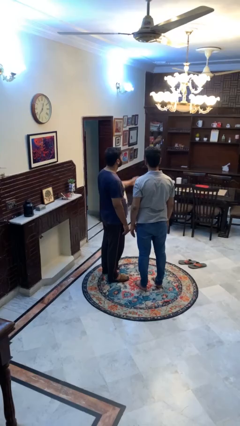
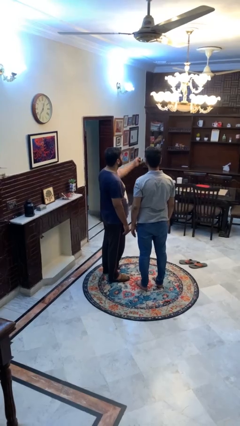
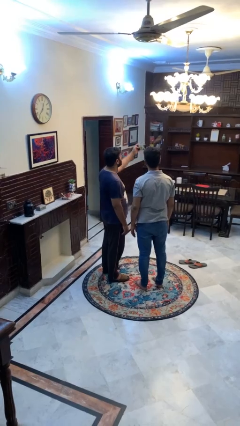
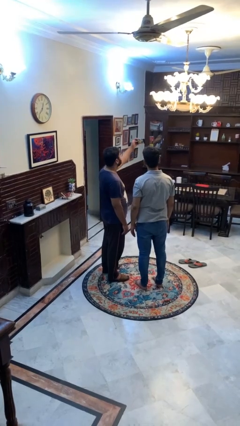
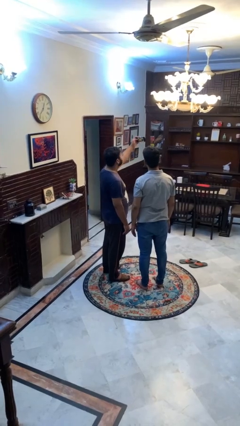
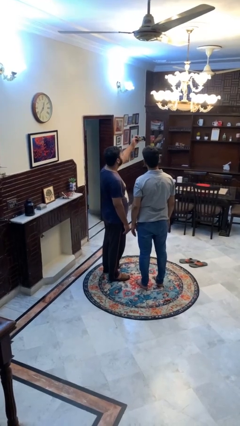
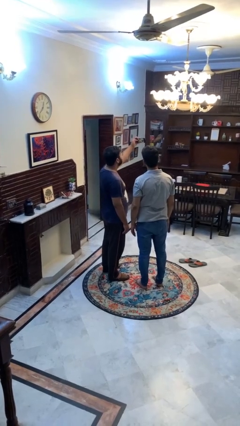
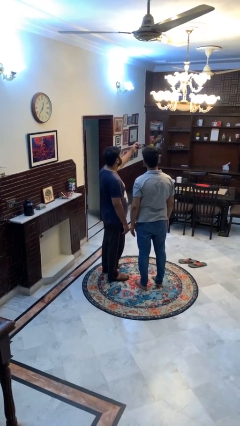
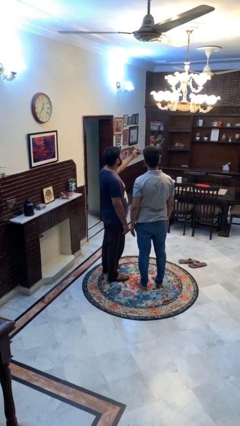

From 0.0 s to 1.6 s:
person takes selfie with person

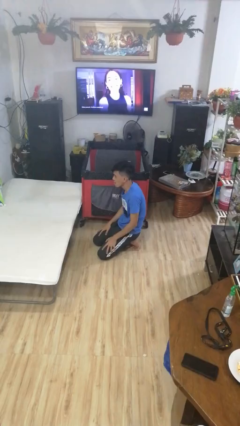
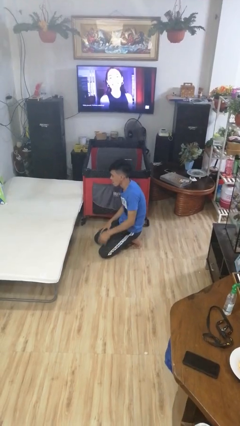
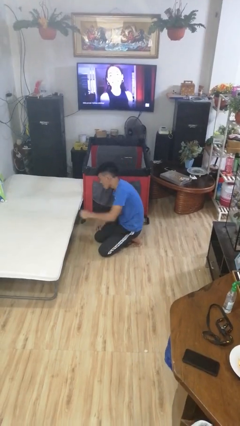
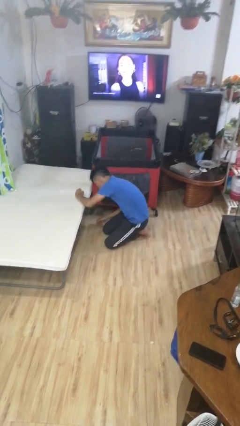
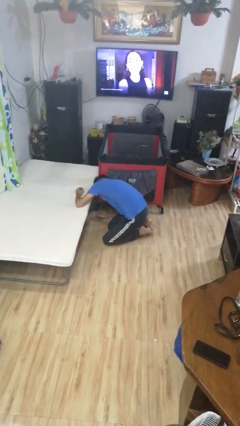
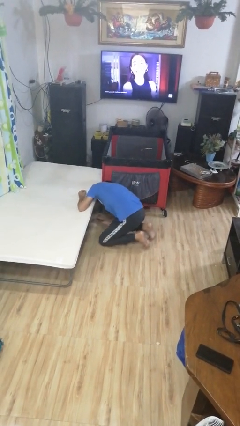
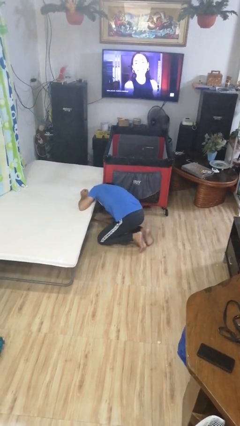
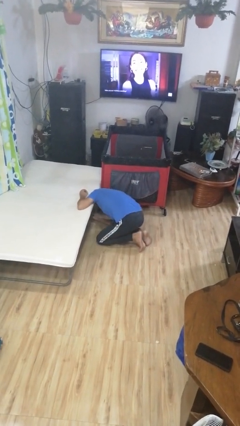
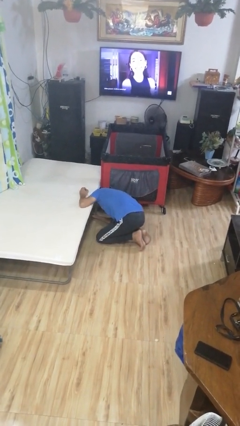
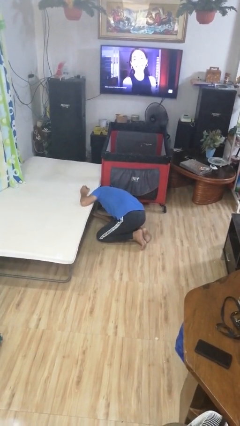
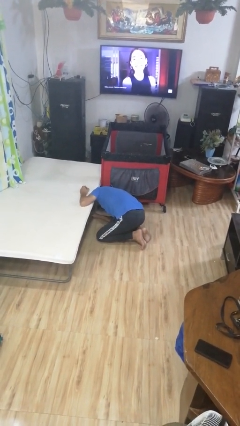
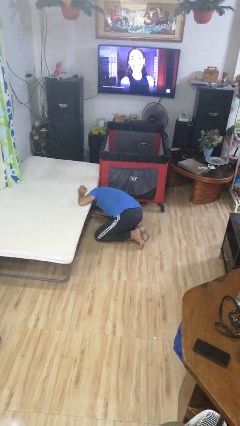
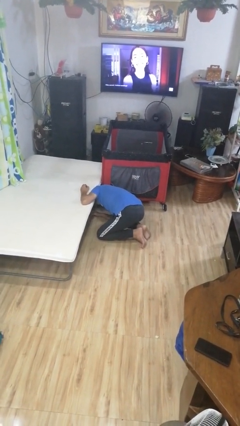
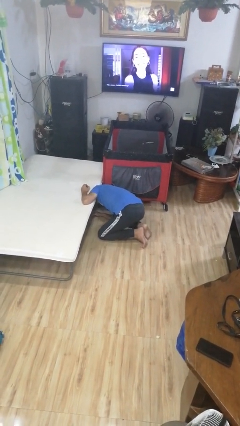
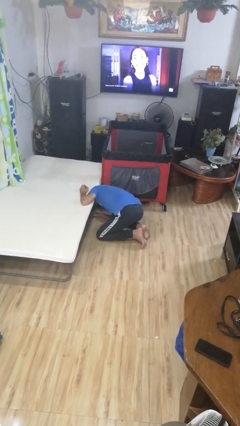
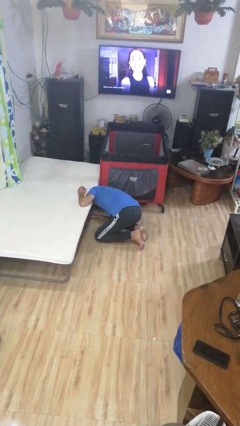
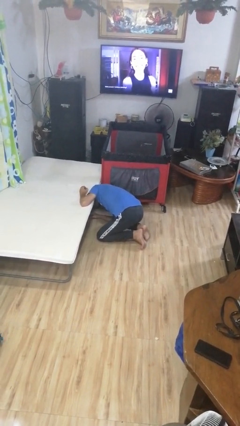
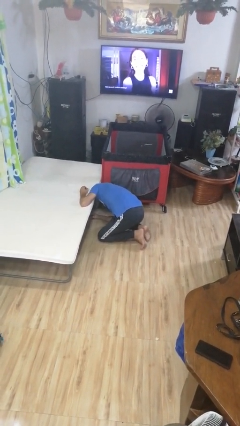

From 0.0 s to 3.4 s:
person searches under bed

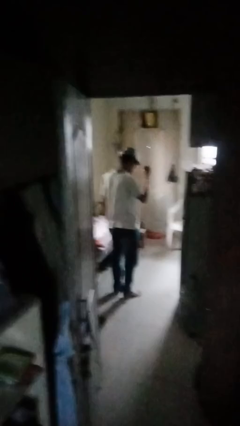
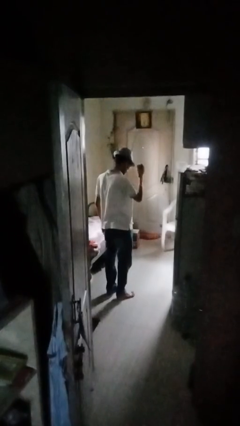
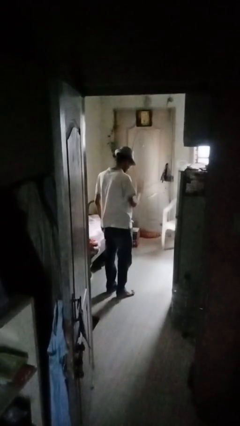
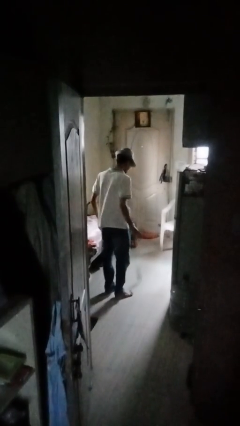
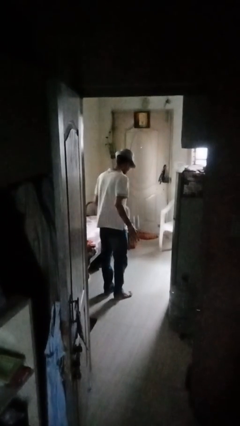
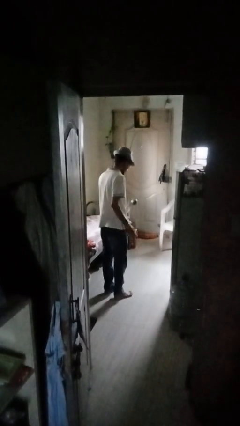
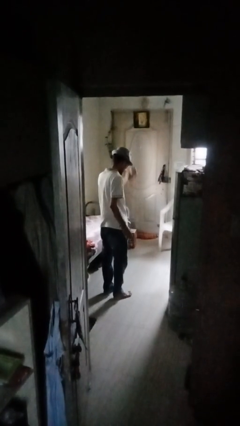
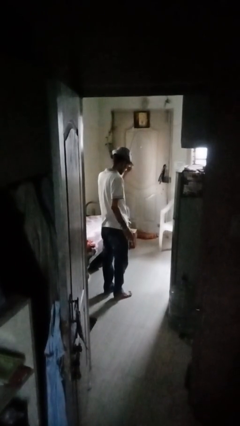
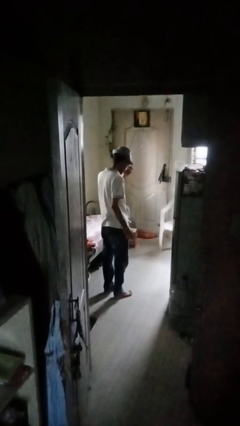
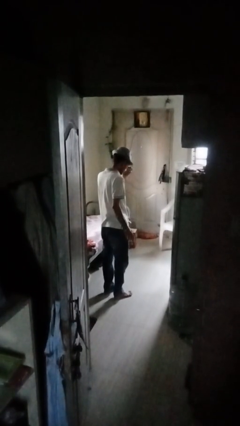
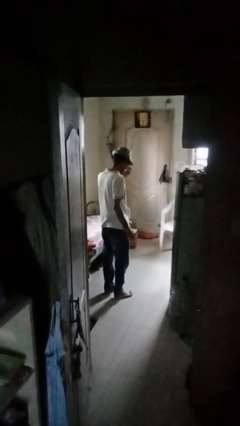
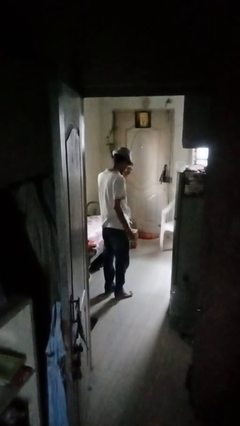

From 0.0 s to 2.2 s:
person bounces ball on floor

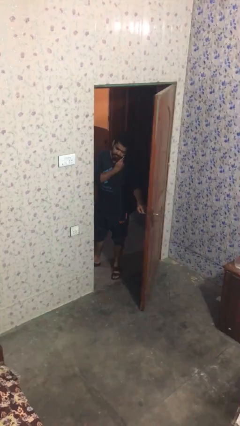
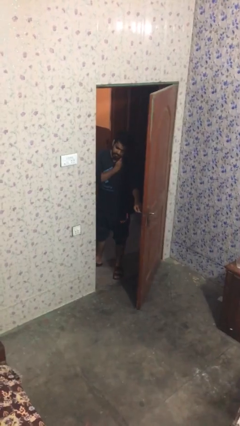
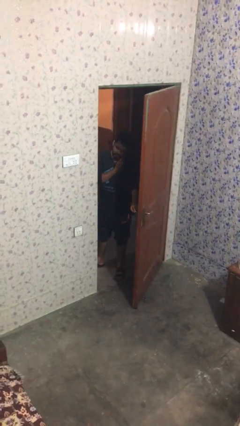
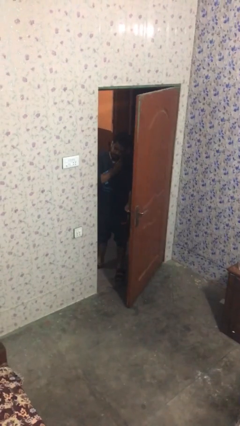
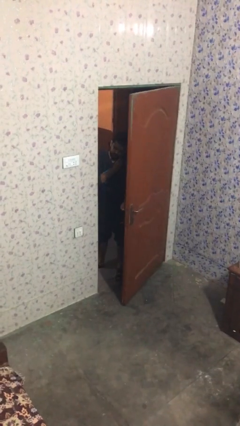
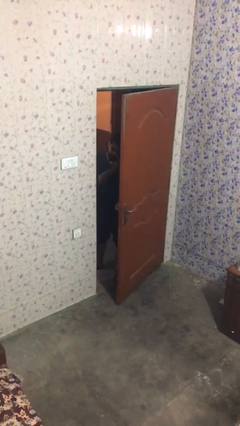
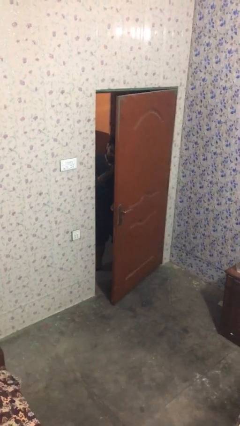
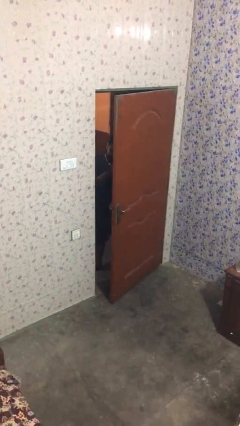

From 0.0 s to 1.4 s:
person closes facility door

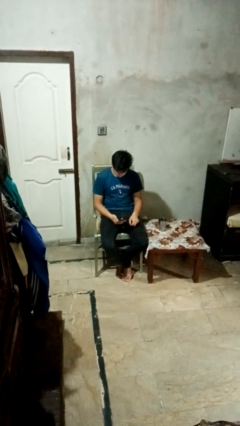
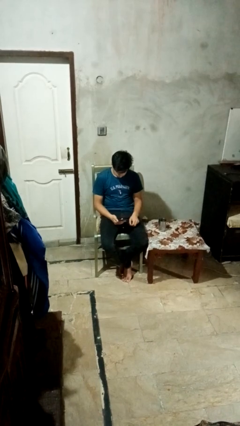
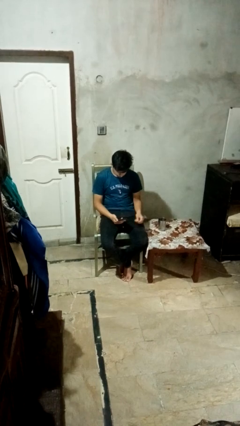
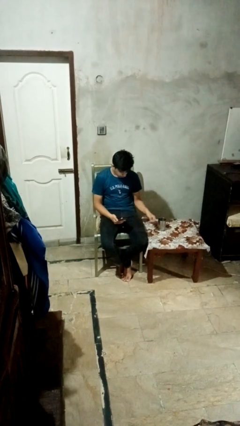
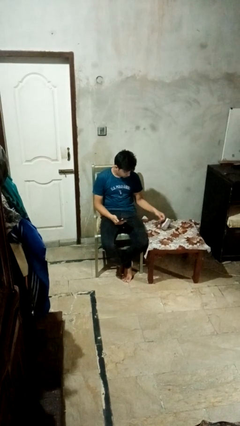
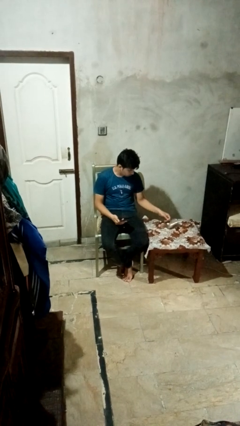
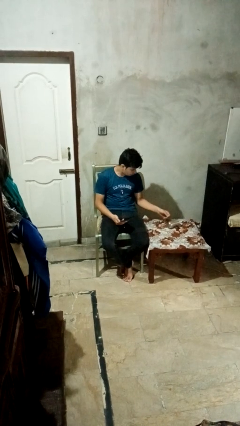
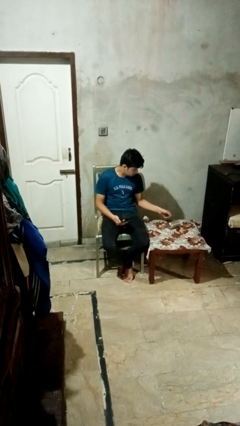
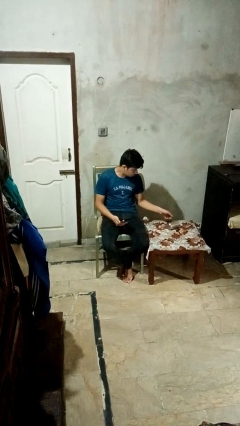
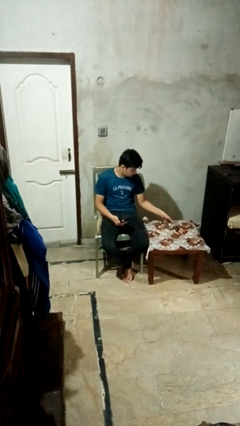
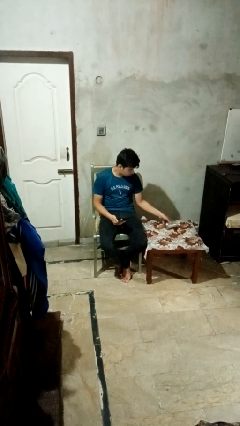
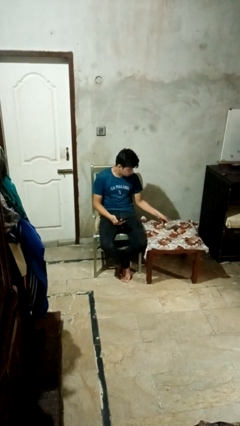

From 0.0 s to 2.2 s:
person knocks over glass

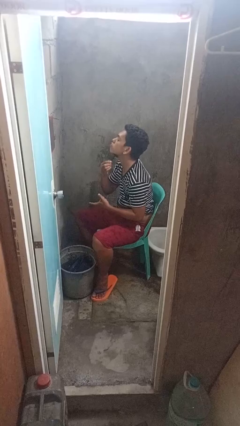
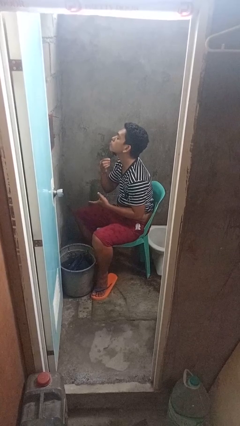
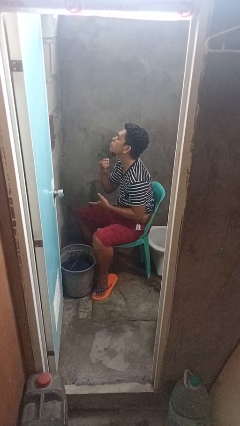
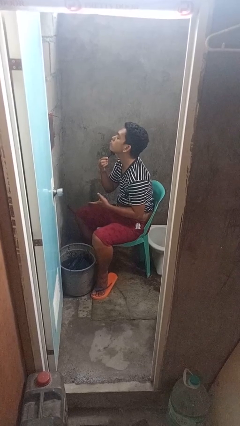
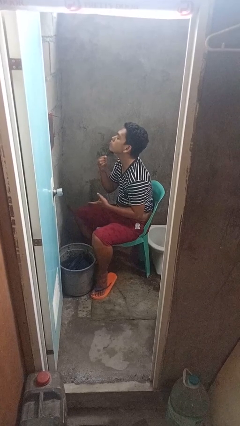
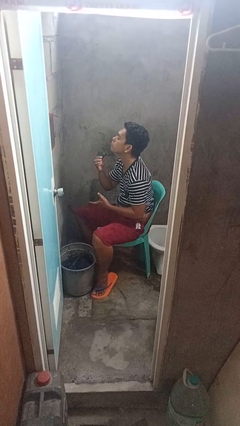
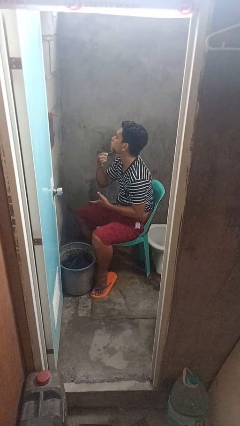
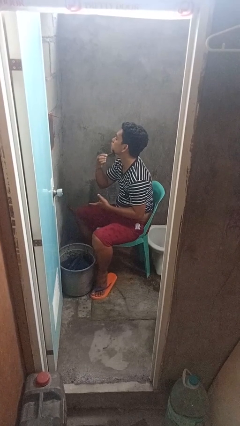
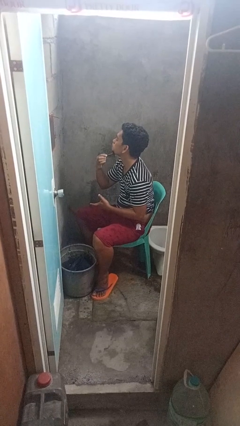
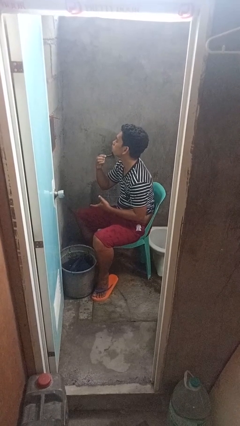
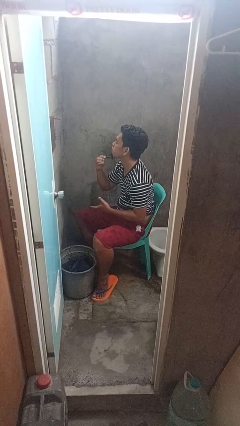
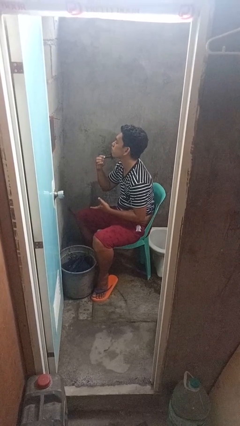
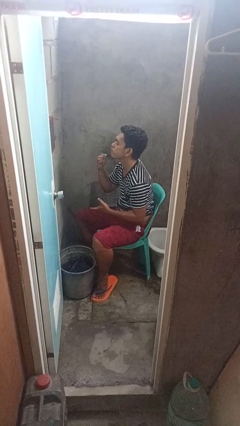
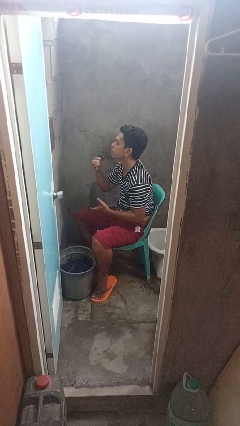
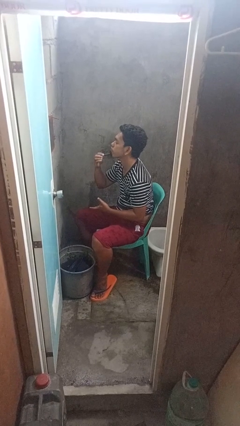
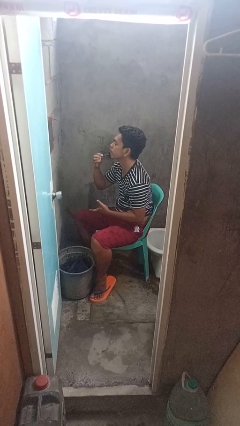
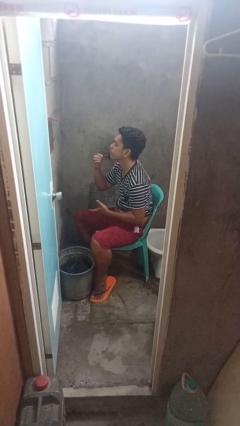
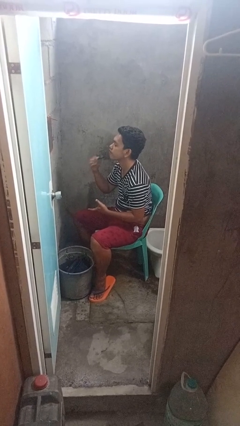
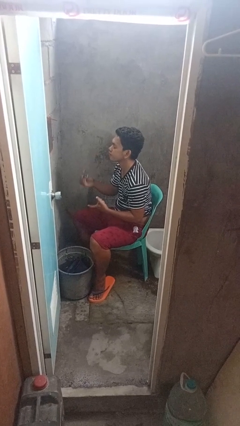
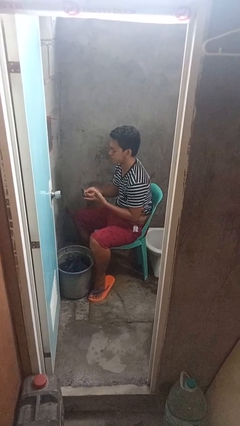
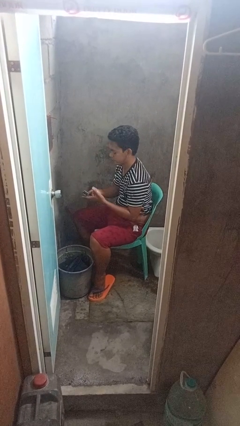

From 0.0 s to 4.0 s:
person shaves face

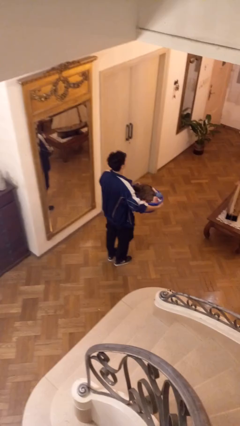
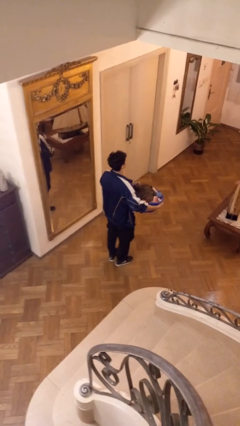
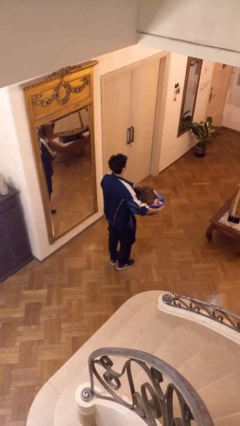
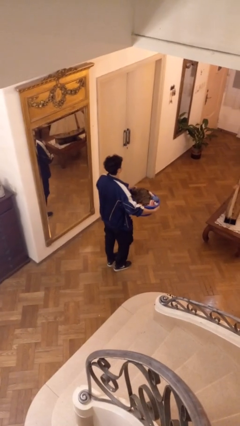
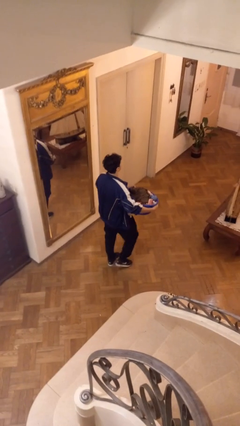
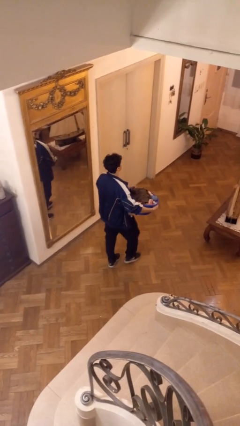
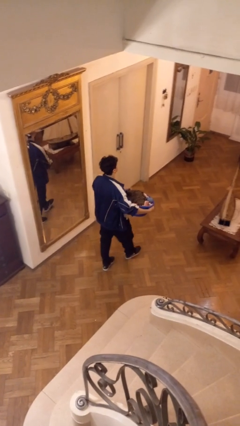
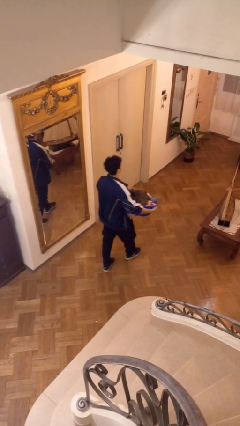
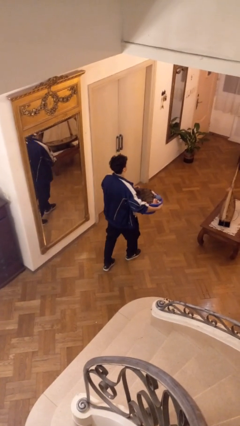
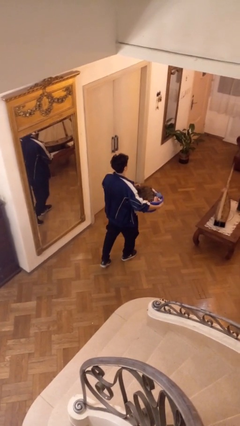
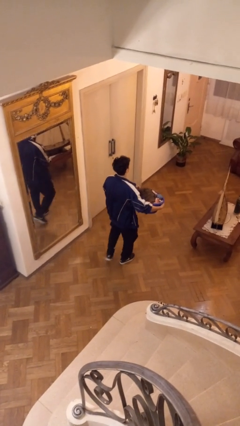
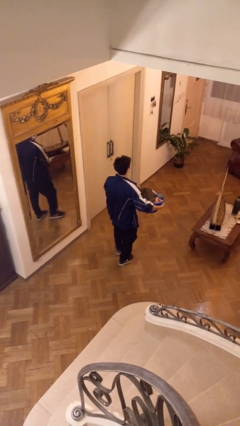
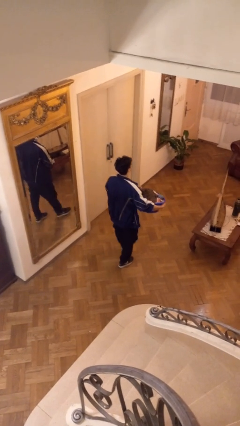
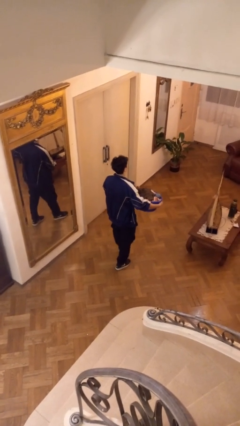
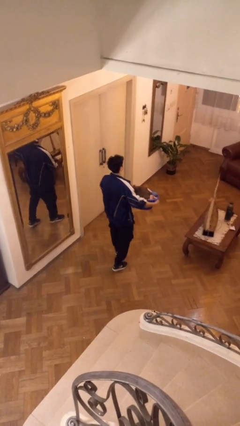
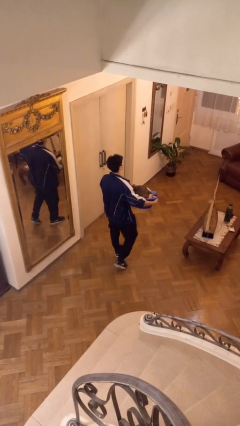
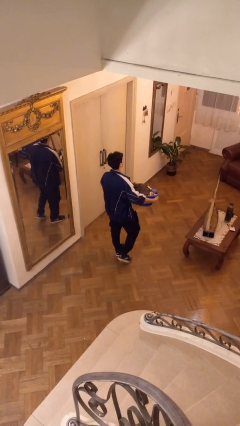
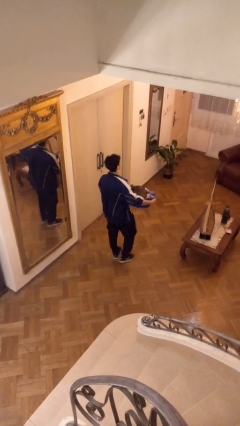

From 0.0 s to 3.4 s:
person carries laundry basket
